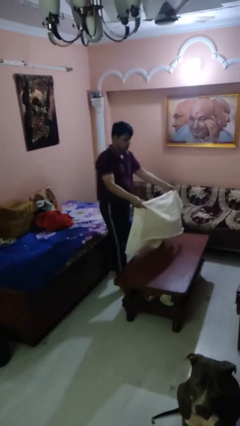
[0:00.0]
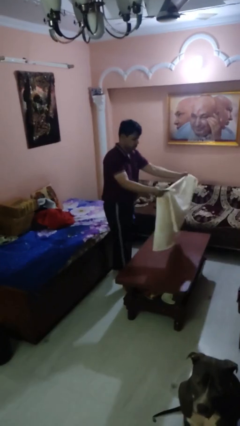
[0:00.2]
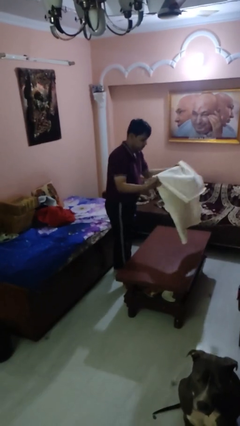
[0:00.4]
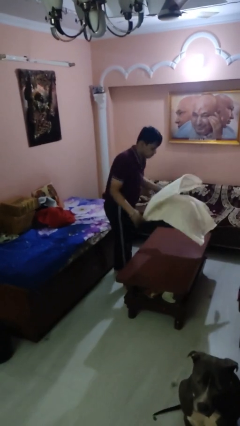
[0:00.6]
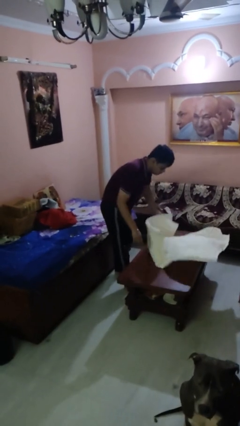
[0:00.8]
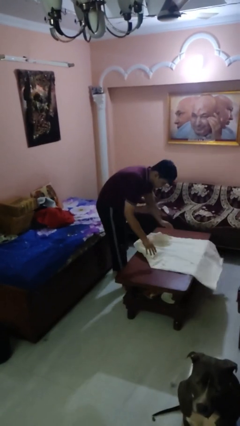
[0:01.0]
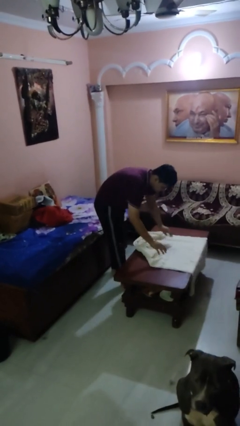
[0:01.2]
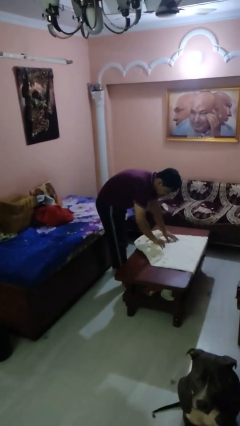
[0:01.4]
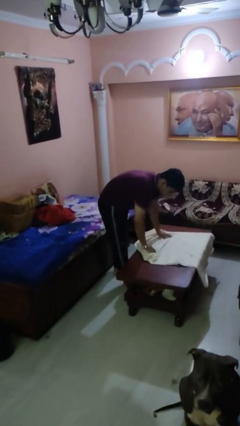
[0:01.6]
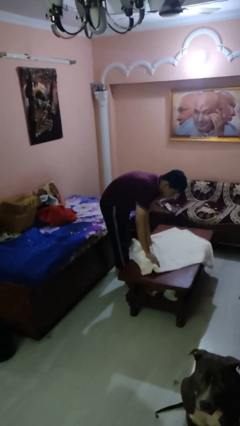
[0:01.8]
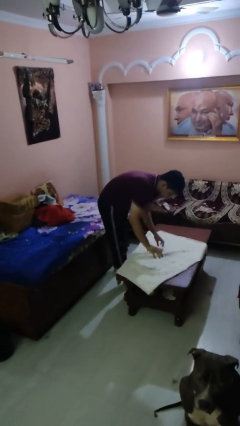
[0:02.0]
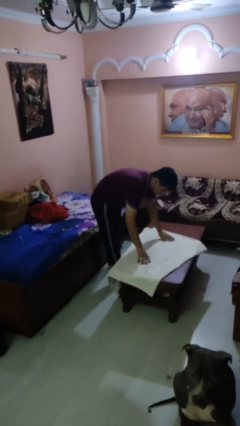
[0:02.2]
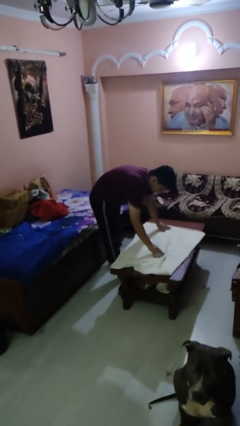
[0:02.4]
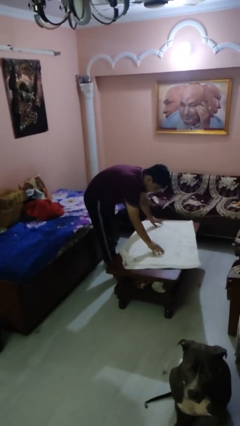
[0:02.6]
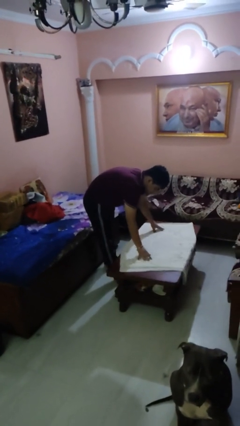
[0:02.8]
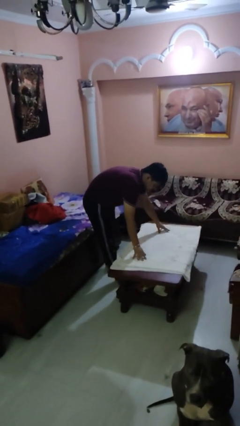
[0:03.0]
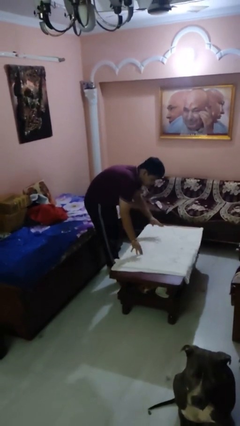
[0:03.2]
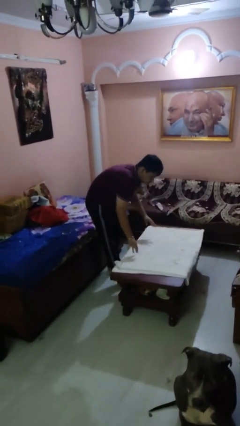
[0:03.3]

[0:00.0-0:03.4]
person spreads tablecloth

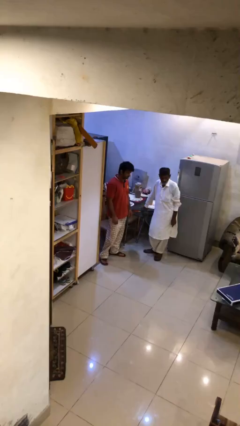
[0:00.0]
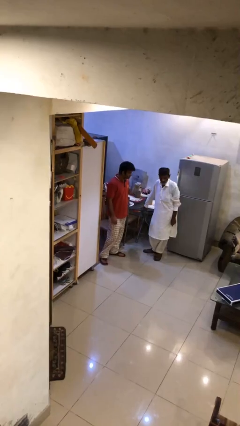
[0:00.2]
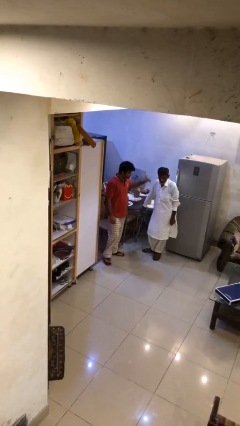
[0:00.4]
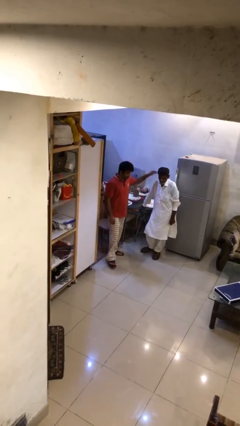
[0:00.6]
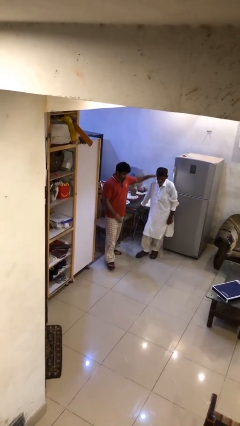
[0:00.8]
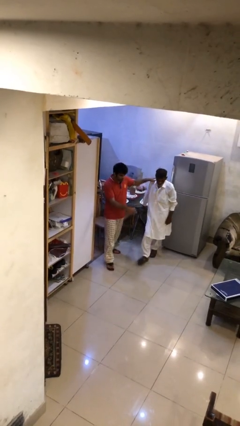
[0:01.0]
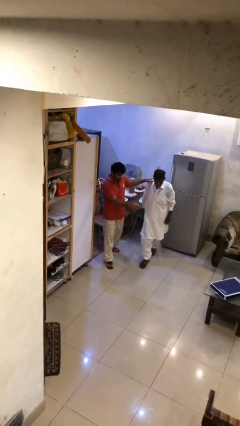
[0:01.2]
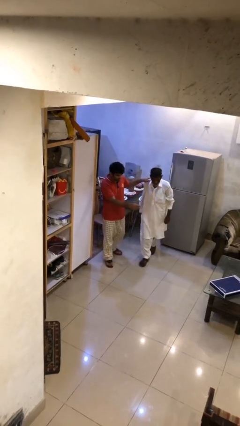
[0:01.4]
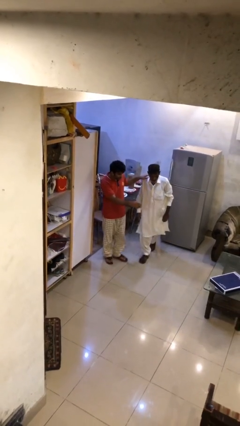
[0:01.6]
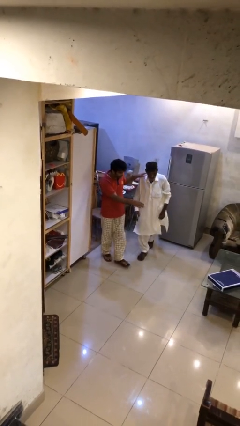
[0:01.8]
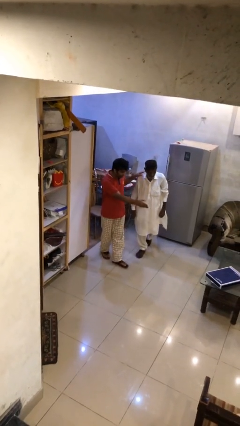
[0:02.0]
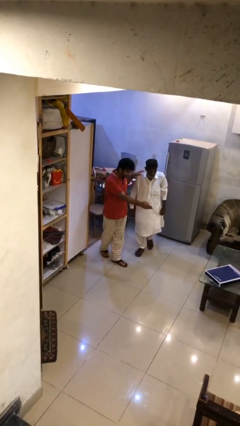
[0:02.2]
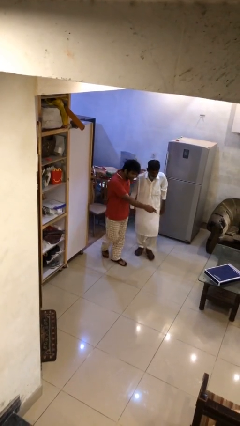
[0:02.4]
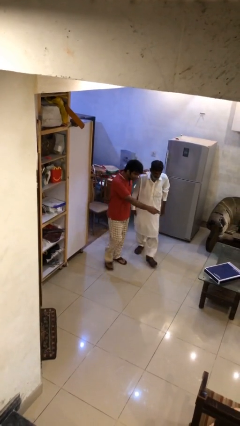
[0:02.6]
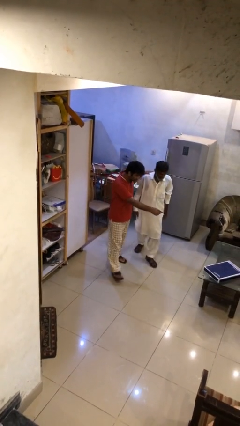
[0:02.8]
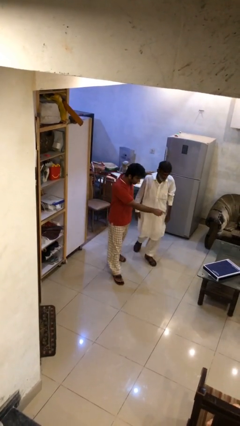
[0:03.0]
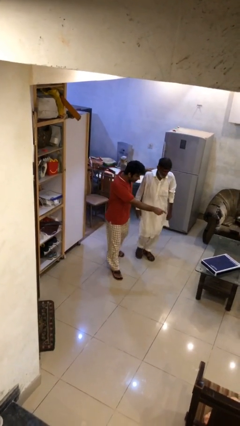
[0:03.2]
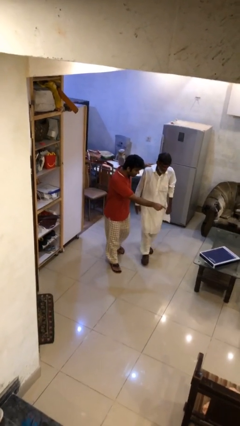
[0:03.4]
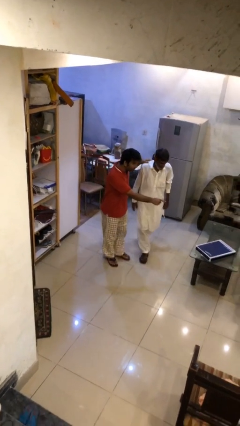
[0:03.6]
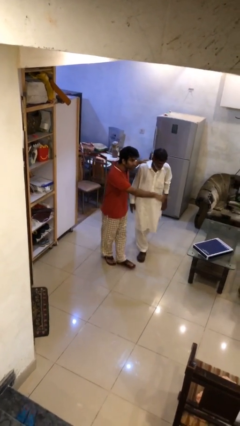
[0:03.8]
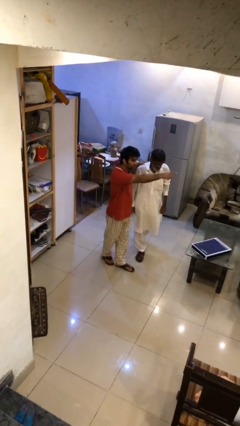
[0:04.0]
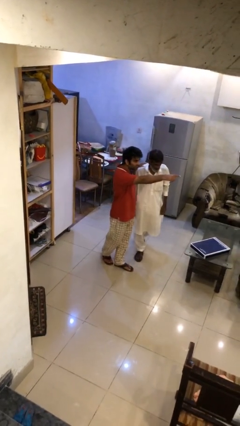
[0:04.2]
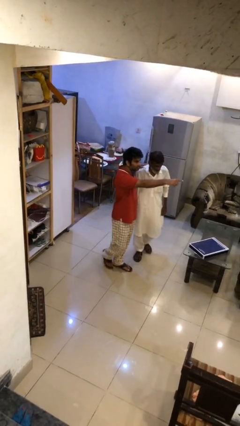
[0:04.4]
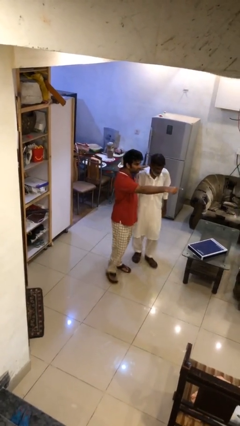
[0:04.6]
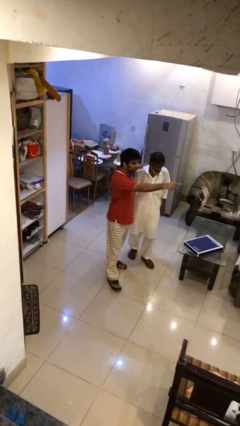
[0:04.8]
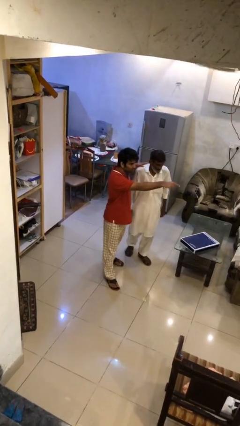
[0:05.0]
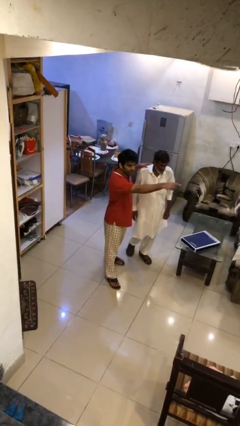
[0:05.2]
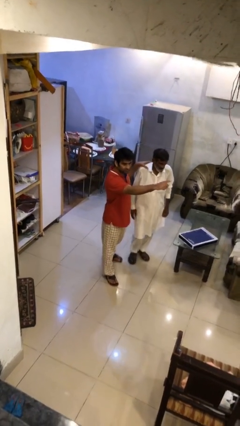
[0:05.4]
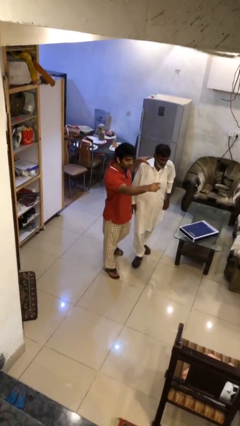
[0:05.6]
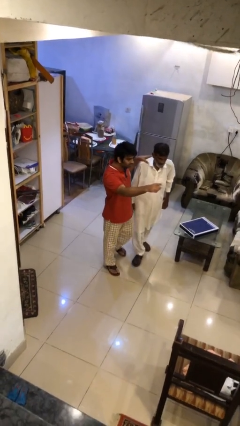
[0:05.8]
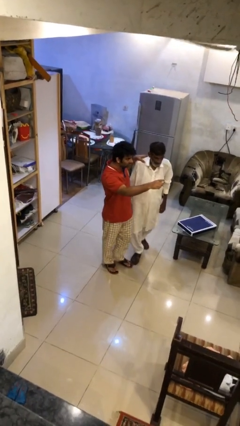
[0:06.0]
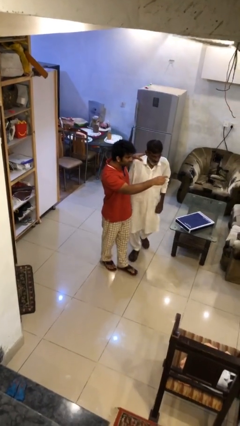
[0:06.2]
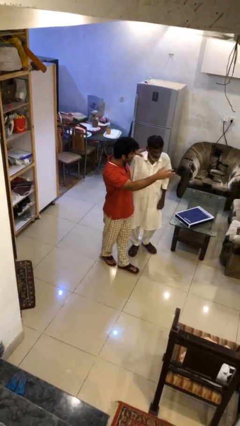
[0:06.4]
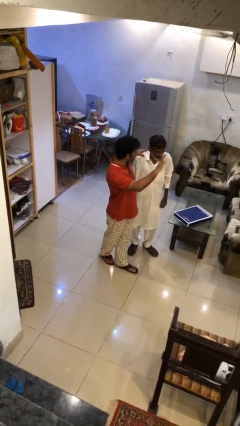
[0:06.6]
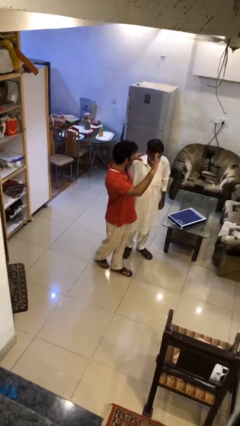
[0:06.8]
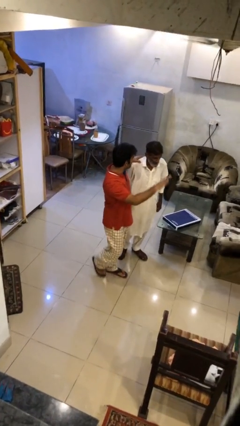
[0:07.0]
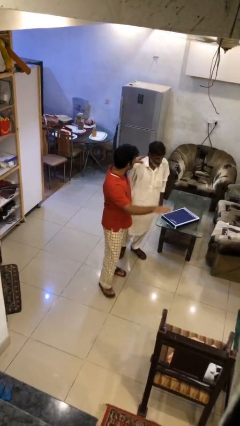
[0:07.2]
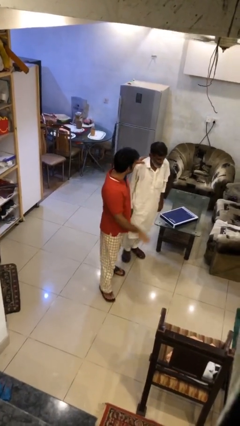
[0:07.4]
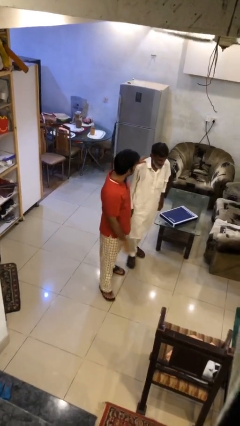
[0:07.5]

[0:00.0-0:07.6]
person talks to person

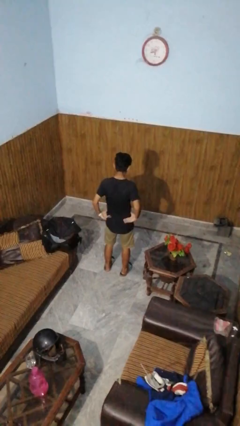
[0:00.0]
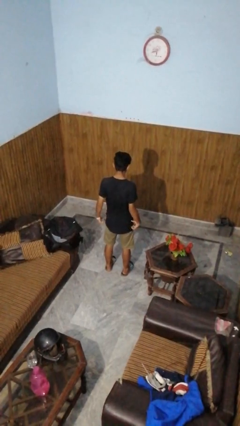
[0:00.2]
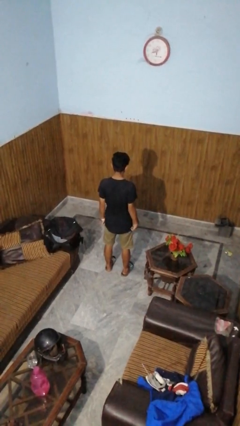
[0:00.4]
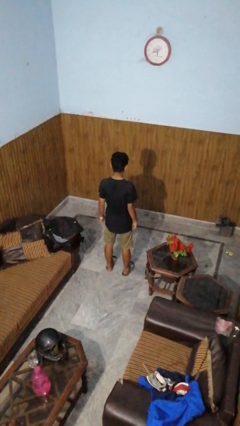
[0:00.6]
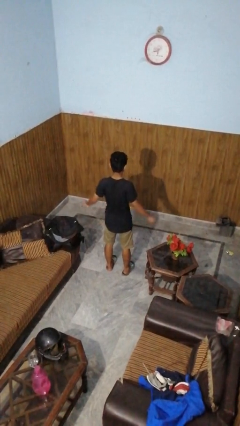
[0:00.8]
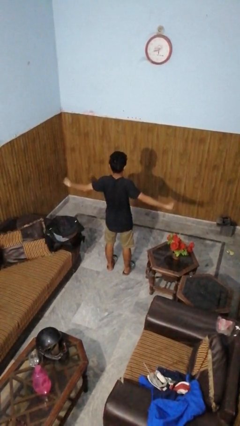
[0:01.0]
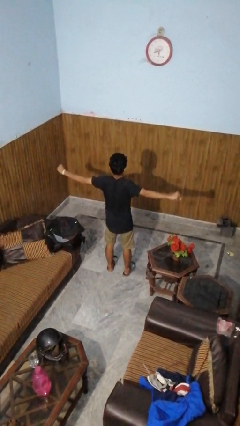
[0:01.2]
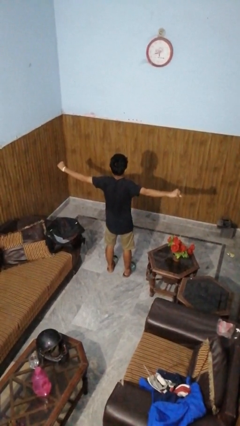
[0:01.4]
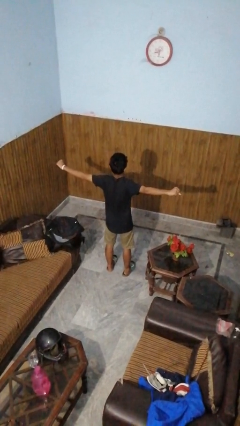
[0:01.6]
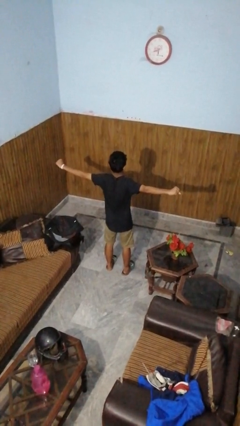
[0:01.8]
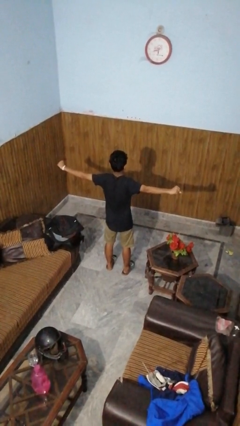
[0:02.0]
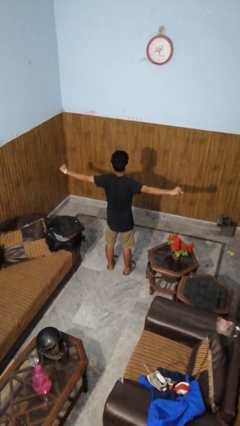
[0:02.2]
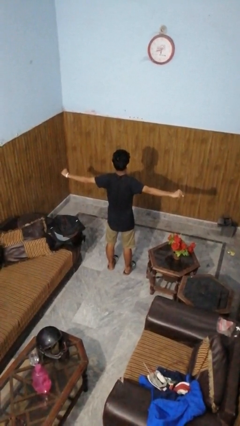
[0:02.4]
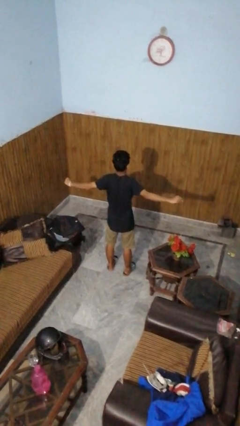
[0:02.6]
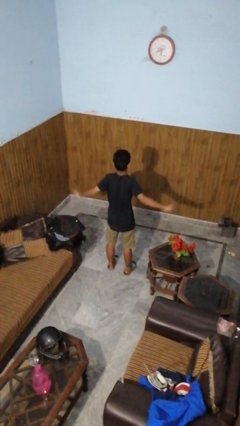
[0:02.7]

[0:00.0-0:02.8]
person stretches arms to side

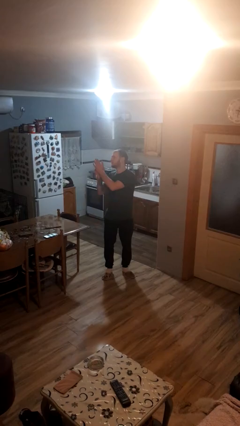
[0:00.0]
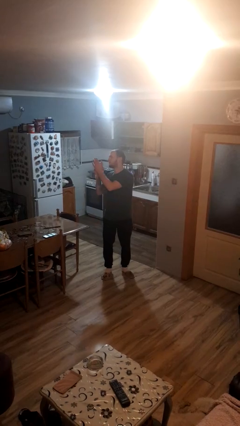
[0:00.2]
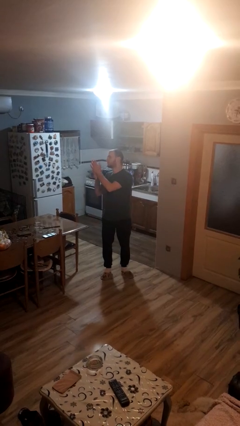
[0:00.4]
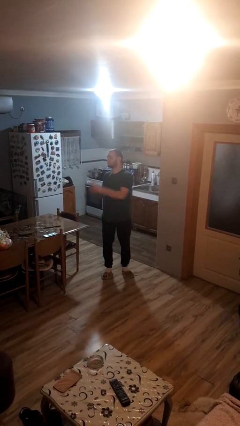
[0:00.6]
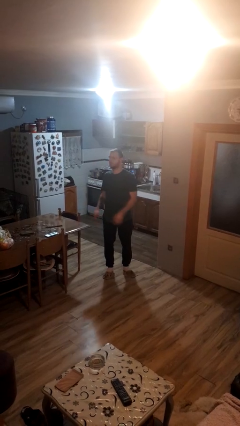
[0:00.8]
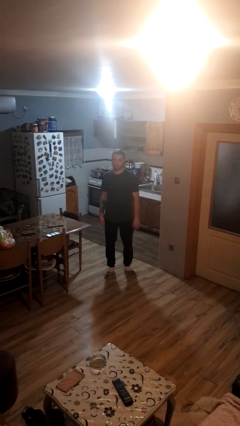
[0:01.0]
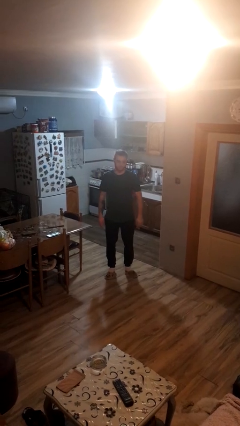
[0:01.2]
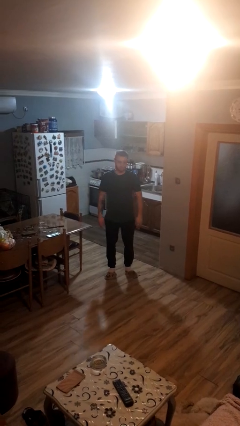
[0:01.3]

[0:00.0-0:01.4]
person claps hands

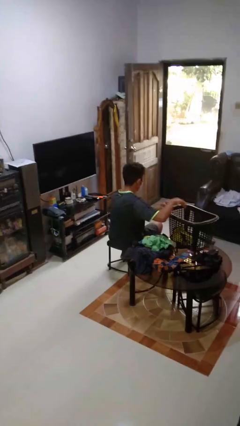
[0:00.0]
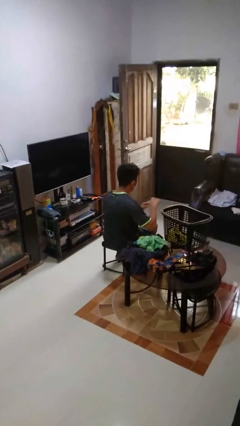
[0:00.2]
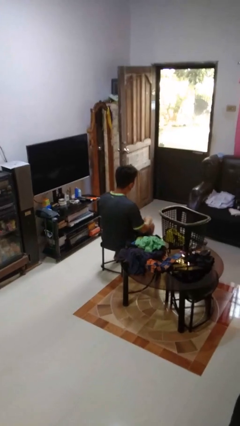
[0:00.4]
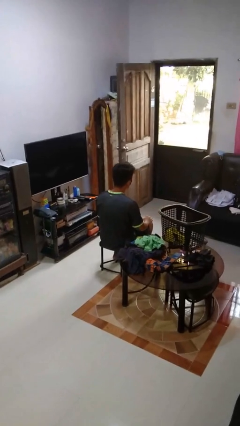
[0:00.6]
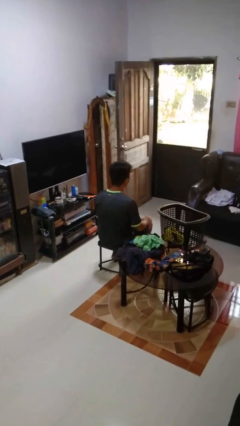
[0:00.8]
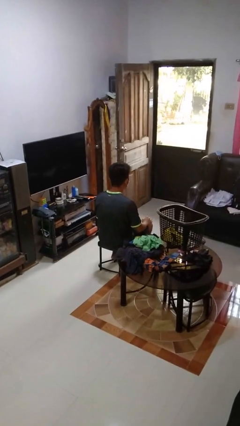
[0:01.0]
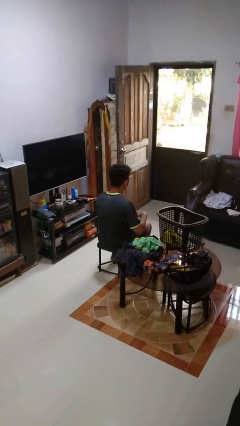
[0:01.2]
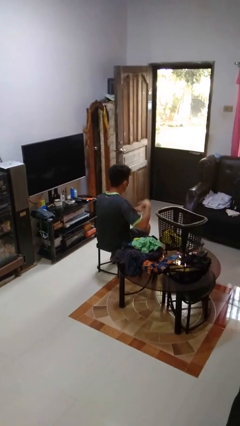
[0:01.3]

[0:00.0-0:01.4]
person puts object into basket

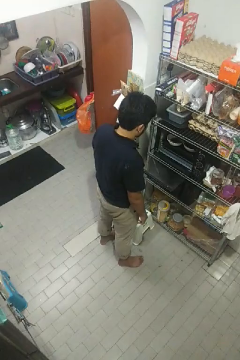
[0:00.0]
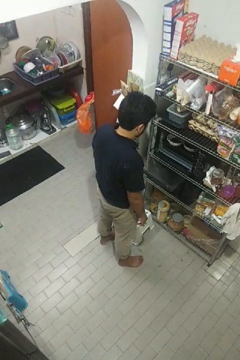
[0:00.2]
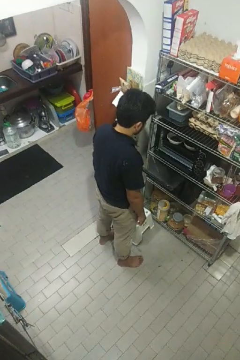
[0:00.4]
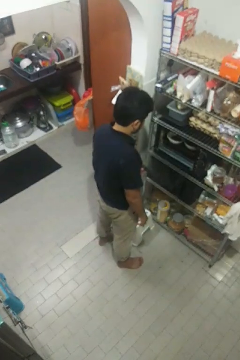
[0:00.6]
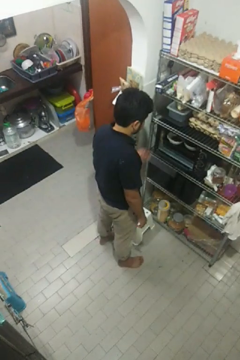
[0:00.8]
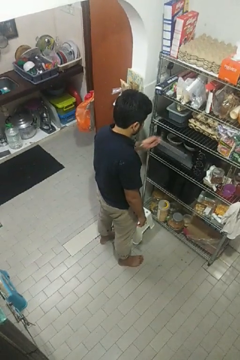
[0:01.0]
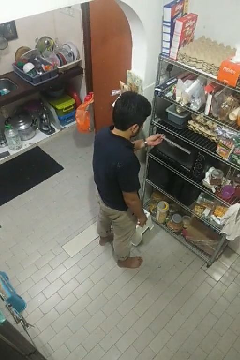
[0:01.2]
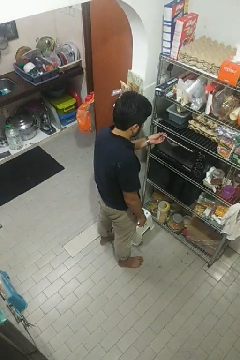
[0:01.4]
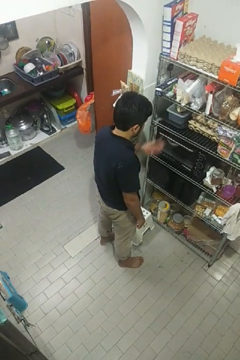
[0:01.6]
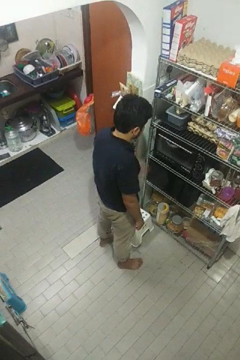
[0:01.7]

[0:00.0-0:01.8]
person closes oven door
